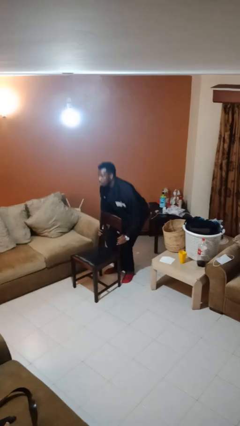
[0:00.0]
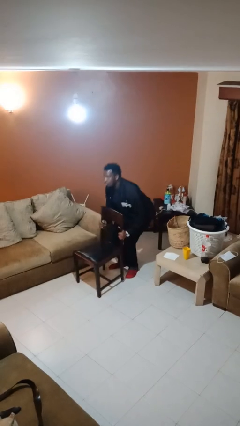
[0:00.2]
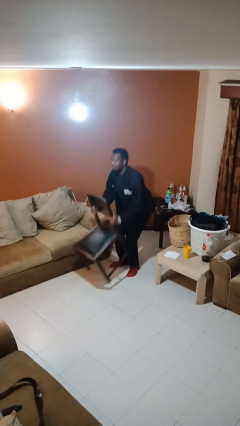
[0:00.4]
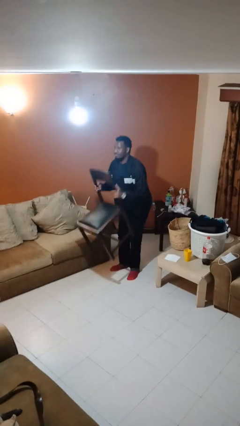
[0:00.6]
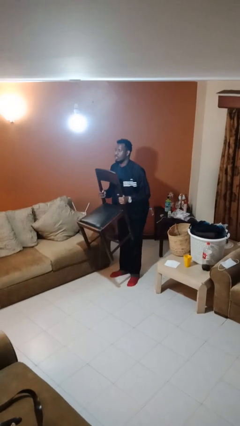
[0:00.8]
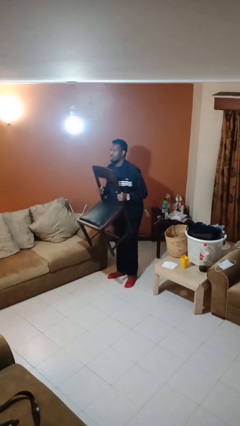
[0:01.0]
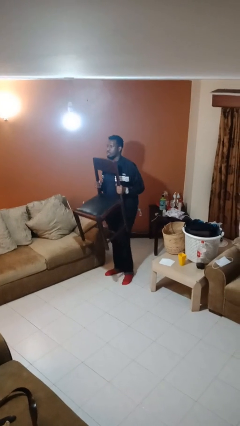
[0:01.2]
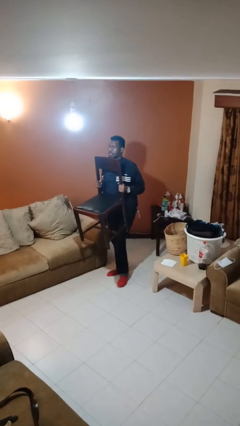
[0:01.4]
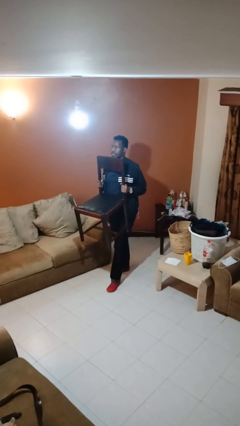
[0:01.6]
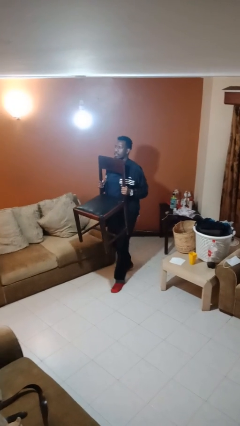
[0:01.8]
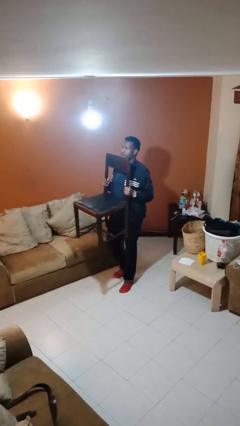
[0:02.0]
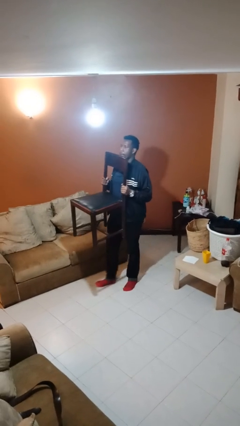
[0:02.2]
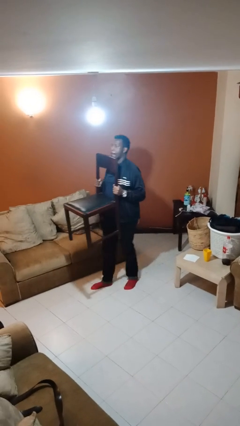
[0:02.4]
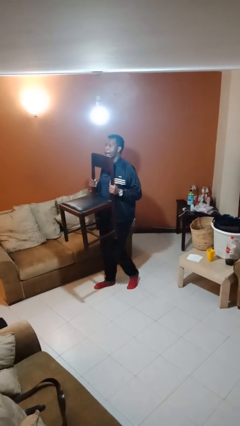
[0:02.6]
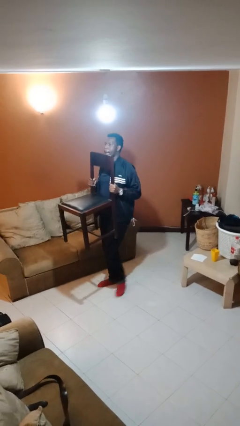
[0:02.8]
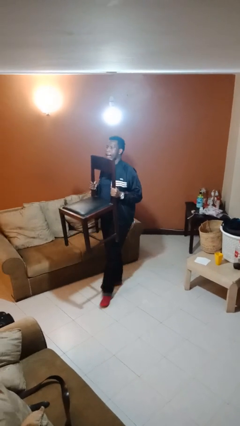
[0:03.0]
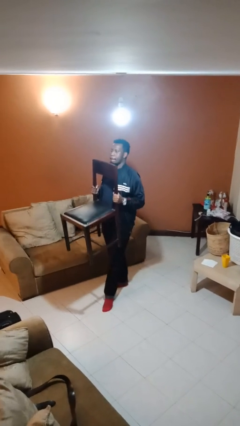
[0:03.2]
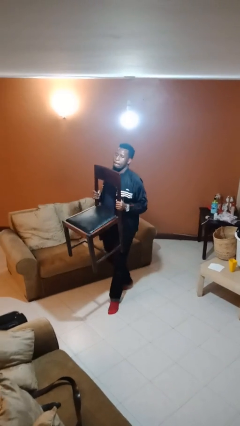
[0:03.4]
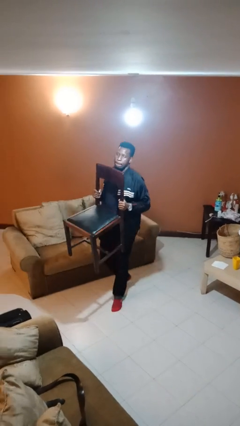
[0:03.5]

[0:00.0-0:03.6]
person carries furniture

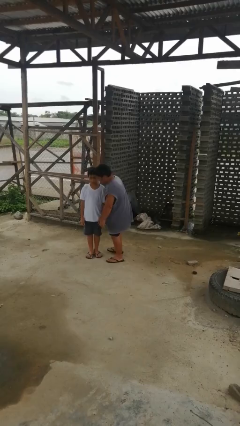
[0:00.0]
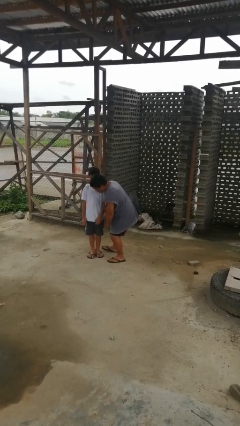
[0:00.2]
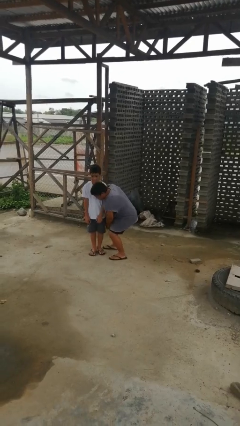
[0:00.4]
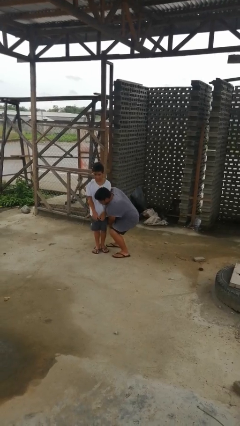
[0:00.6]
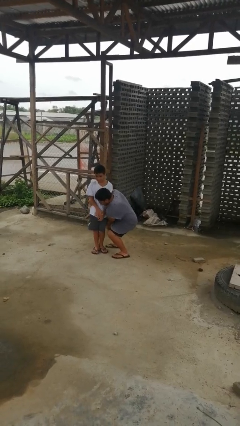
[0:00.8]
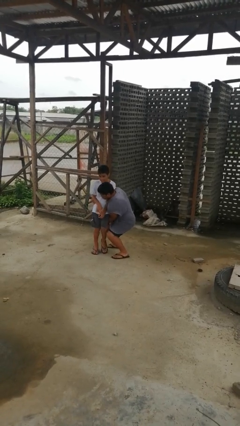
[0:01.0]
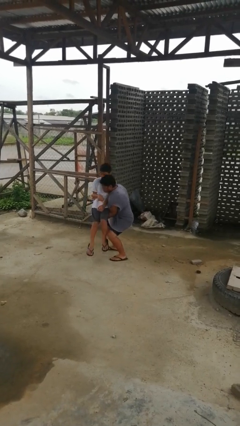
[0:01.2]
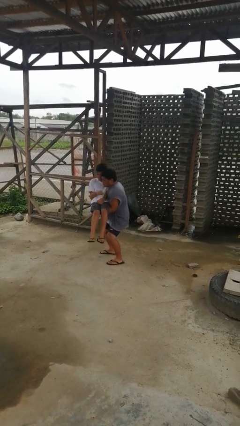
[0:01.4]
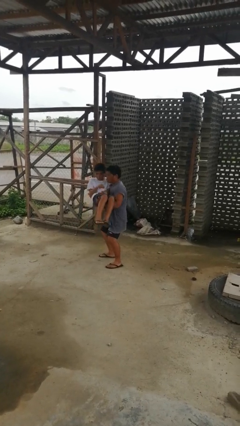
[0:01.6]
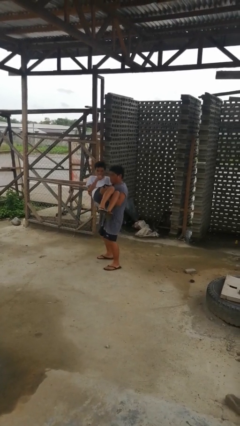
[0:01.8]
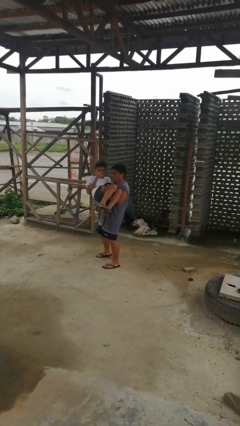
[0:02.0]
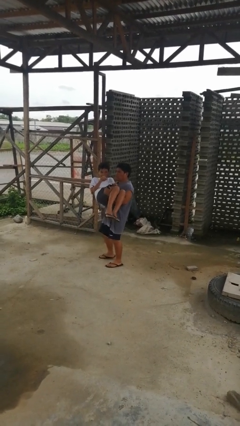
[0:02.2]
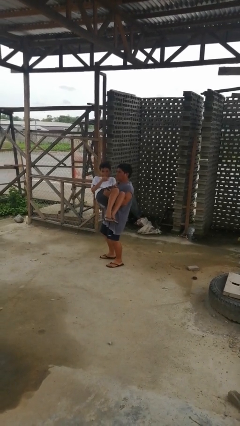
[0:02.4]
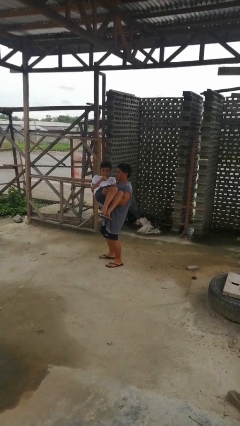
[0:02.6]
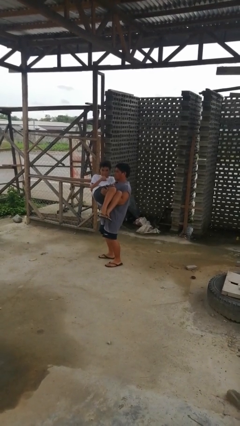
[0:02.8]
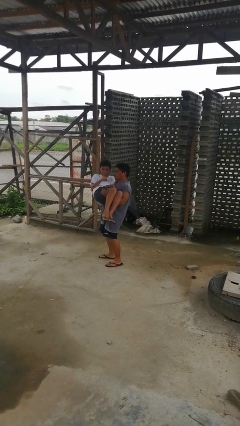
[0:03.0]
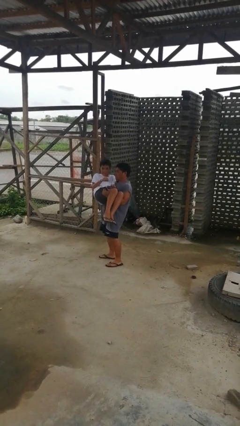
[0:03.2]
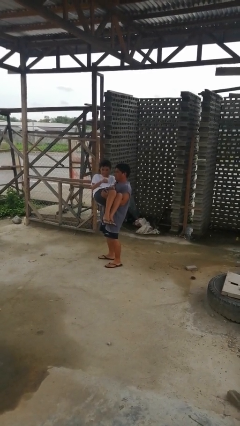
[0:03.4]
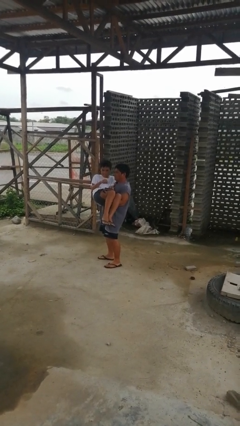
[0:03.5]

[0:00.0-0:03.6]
person picks up person

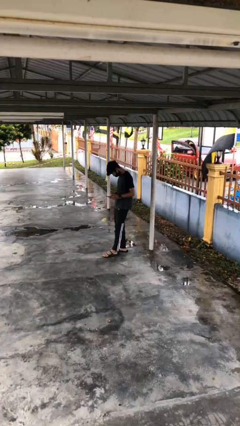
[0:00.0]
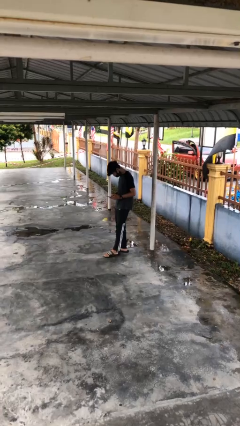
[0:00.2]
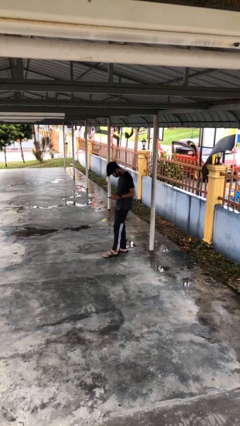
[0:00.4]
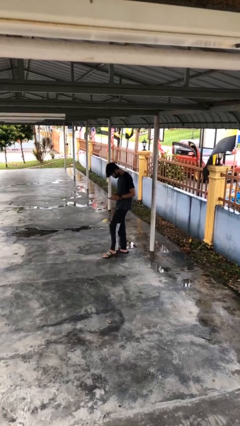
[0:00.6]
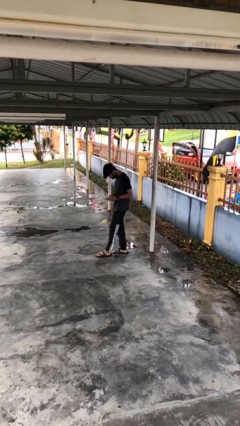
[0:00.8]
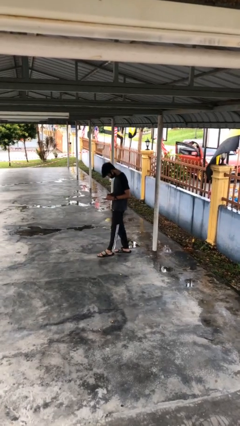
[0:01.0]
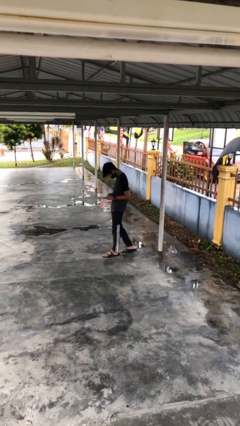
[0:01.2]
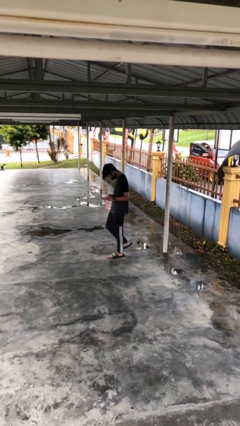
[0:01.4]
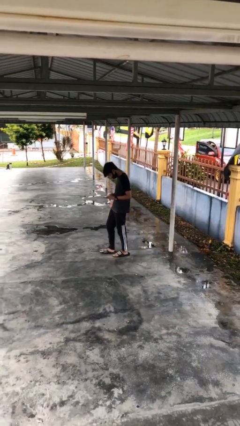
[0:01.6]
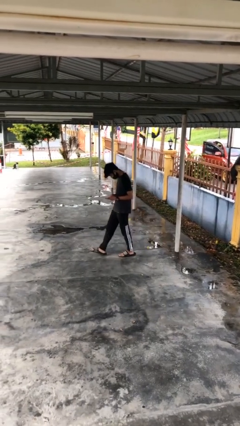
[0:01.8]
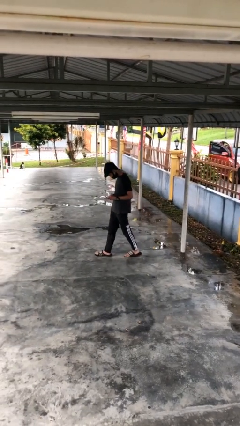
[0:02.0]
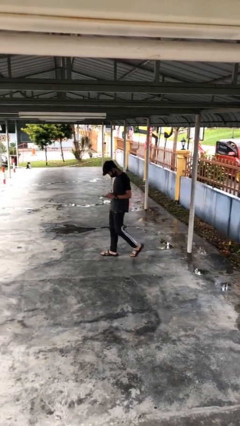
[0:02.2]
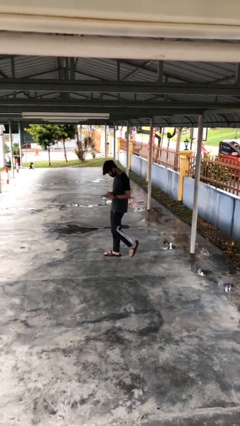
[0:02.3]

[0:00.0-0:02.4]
person texts on phone

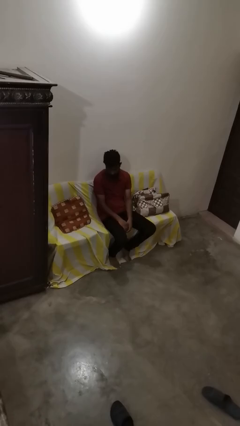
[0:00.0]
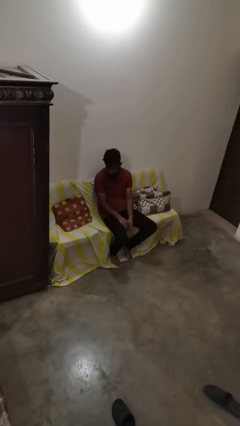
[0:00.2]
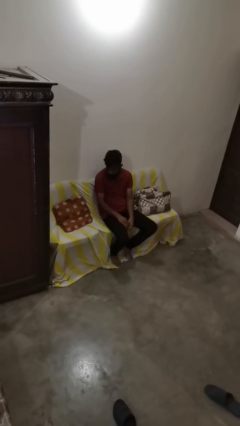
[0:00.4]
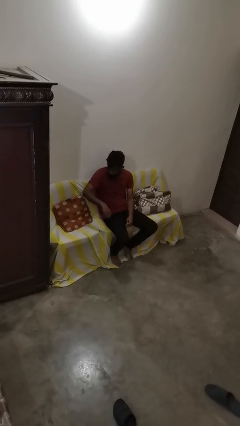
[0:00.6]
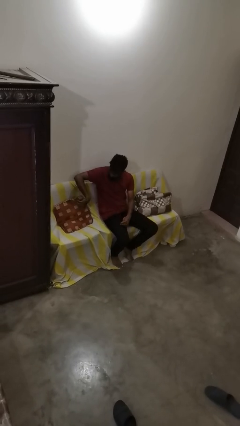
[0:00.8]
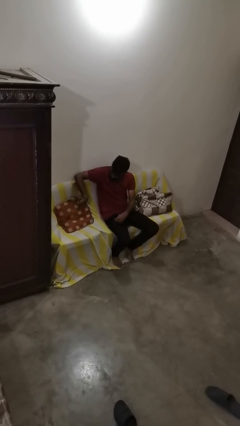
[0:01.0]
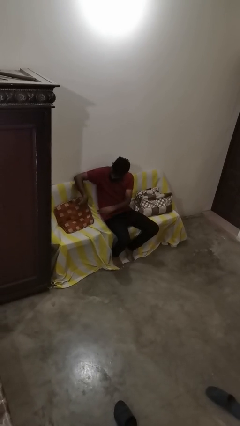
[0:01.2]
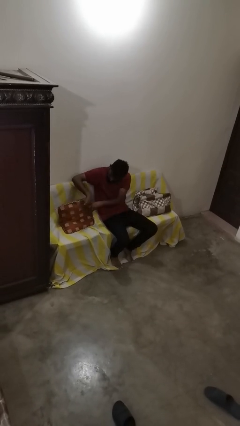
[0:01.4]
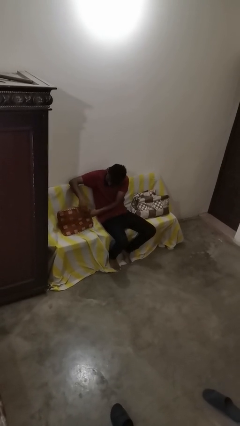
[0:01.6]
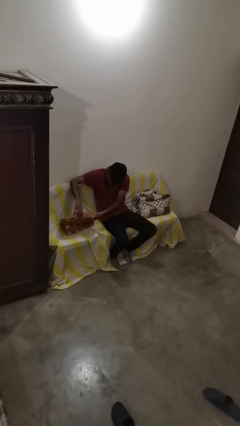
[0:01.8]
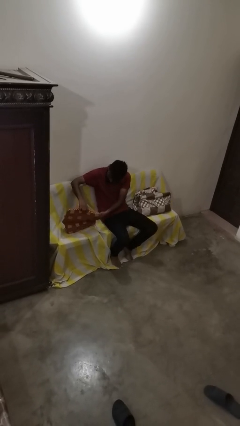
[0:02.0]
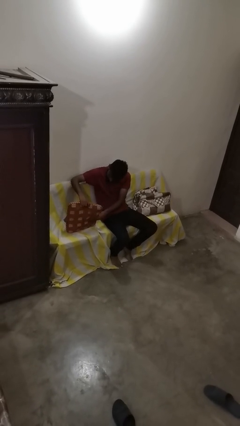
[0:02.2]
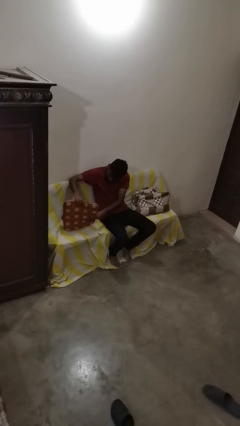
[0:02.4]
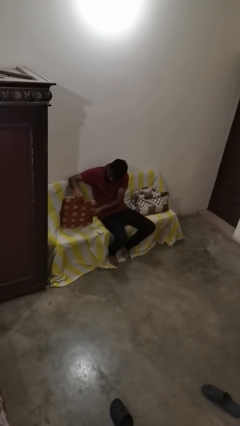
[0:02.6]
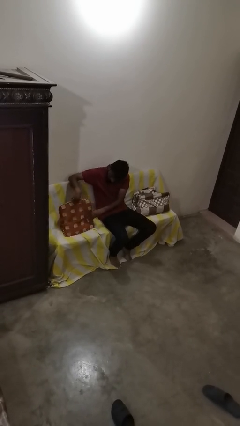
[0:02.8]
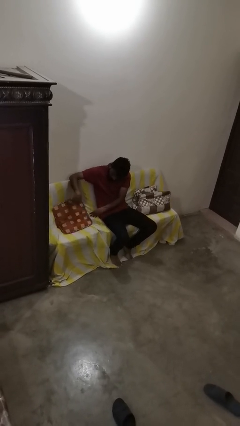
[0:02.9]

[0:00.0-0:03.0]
person searches in couch

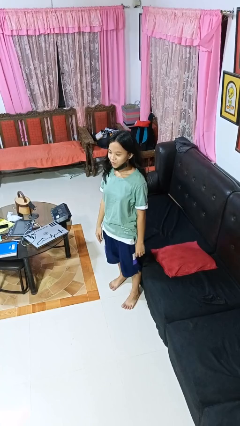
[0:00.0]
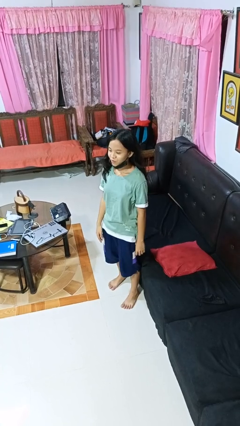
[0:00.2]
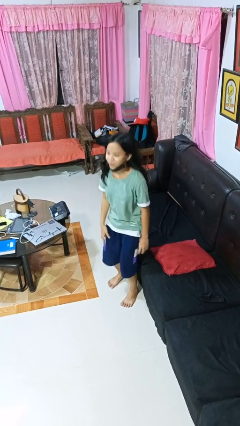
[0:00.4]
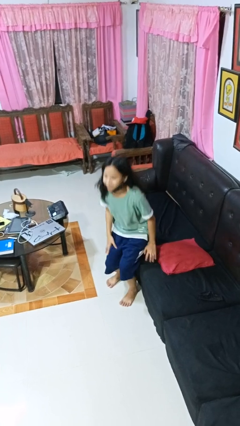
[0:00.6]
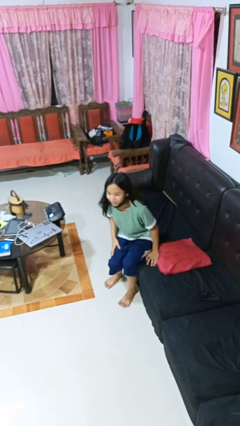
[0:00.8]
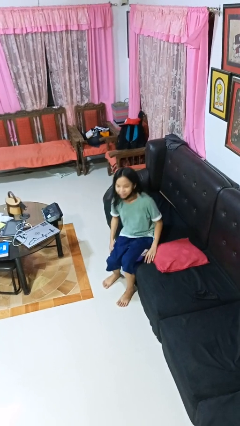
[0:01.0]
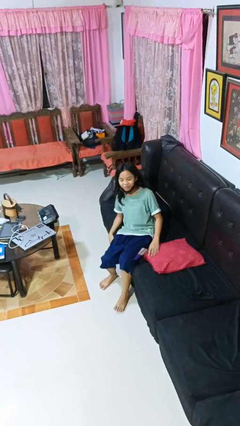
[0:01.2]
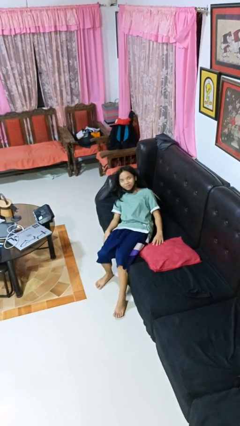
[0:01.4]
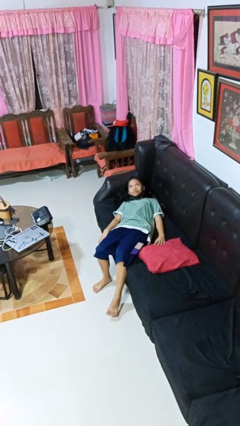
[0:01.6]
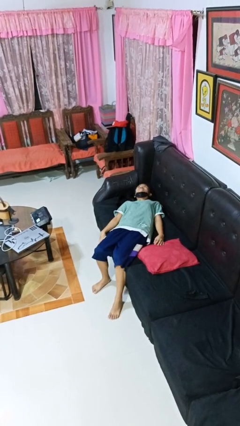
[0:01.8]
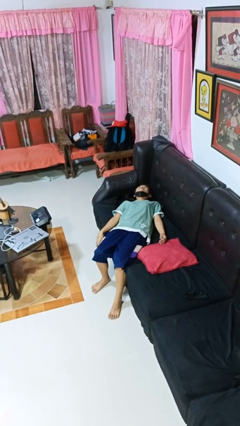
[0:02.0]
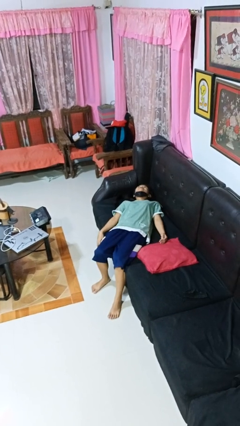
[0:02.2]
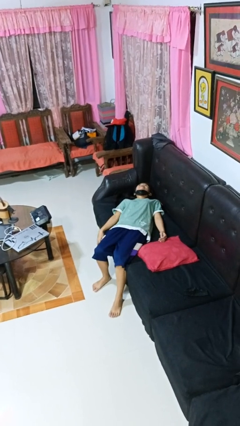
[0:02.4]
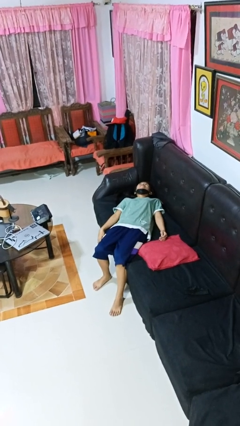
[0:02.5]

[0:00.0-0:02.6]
person lies down on couch

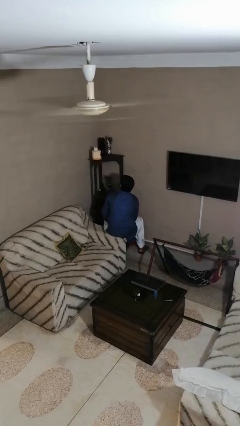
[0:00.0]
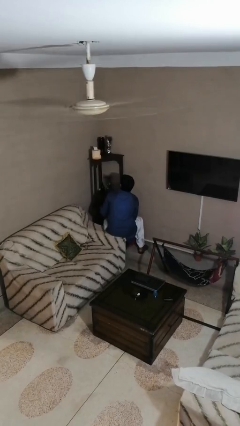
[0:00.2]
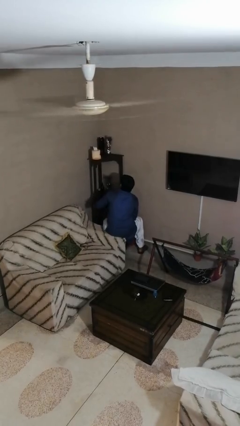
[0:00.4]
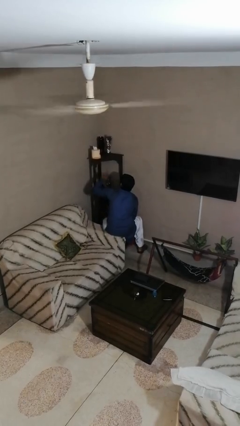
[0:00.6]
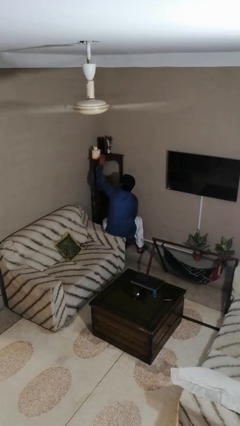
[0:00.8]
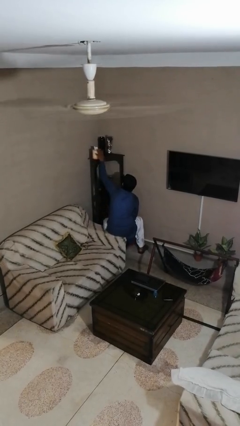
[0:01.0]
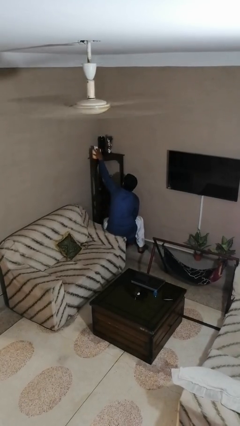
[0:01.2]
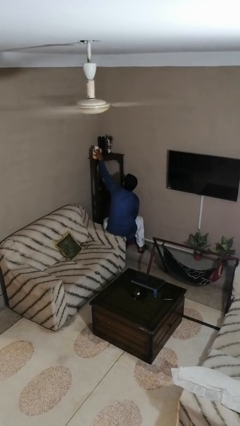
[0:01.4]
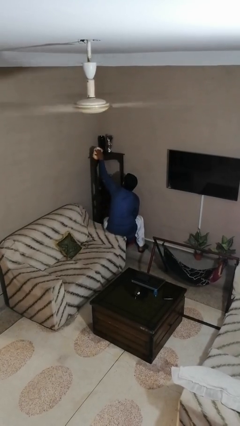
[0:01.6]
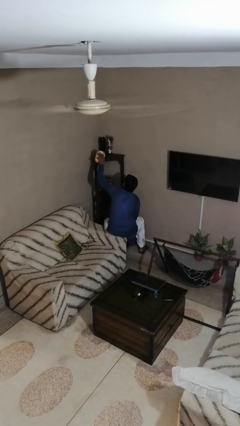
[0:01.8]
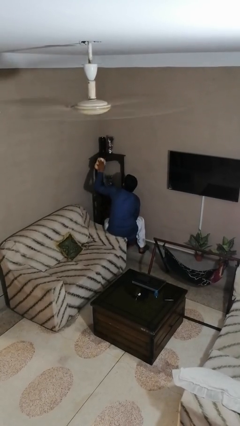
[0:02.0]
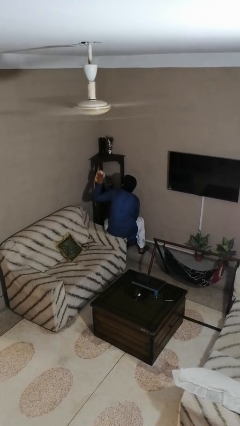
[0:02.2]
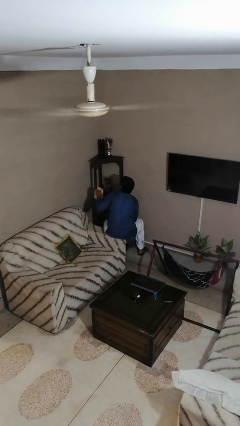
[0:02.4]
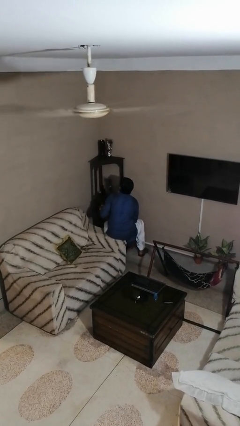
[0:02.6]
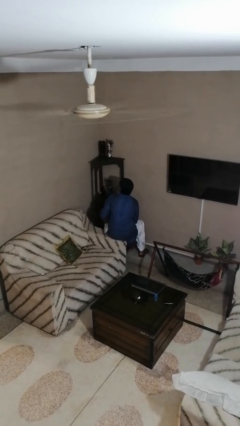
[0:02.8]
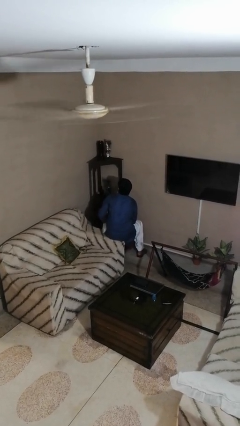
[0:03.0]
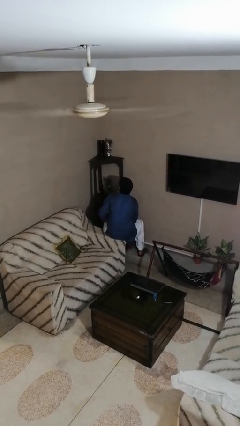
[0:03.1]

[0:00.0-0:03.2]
person picks up object from shelf
